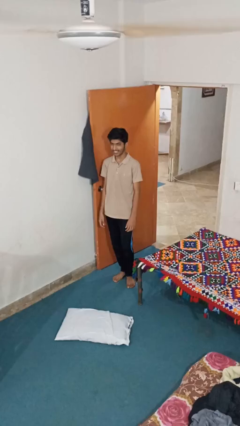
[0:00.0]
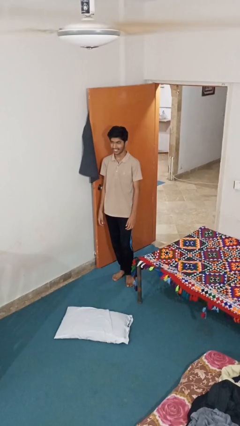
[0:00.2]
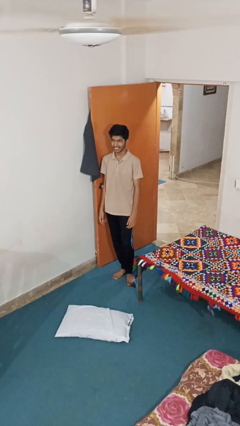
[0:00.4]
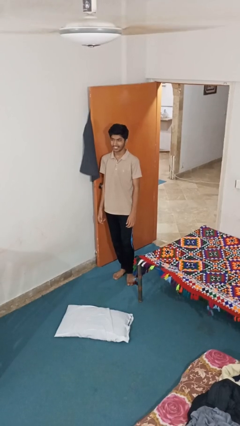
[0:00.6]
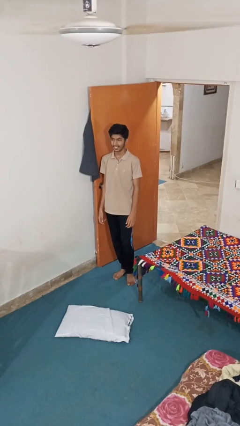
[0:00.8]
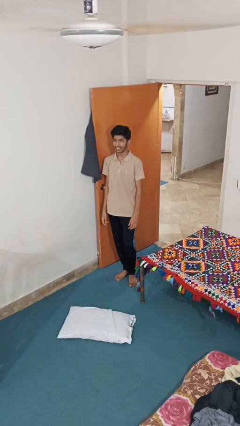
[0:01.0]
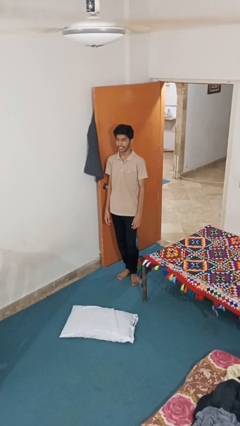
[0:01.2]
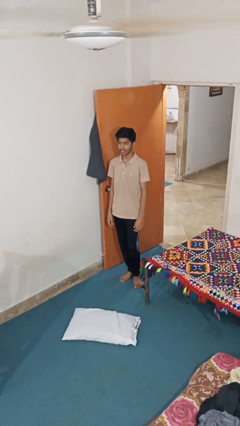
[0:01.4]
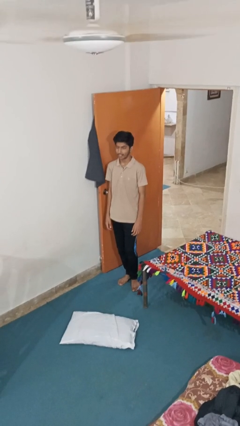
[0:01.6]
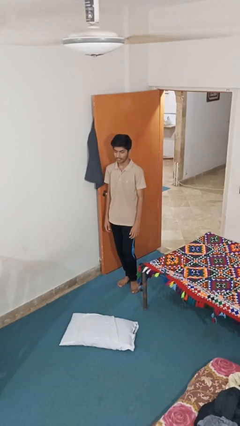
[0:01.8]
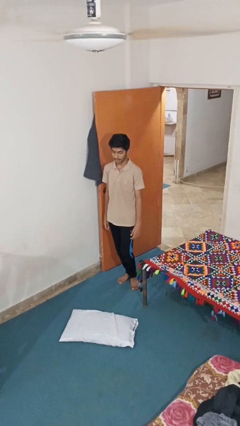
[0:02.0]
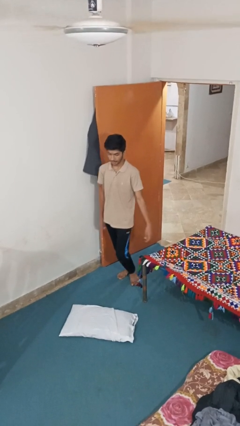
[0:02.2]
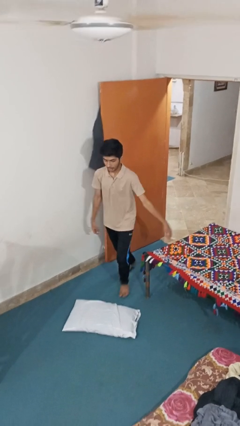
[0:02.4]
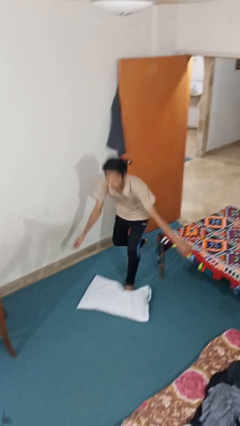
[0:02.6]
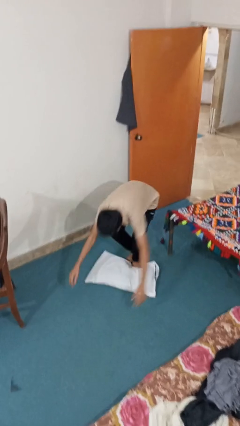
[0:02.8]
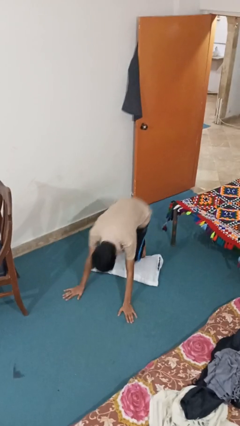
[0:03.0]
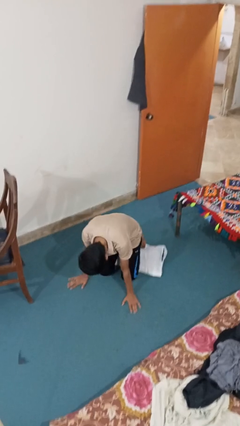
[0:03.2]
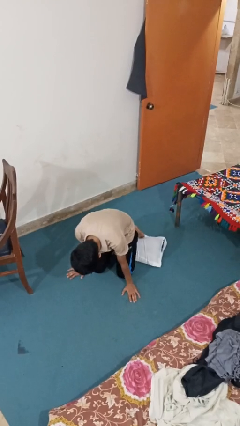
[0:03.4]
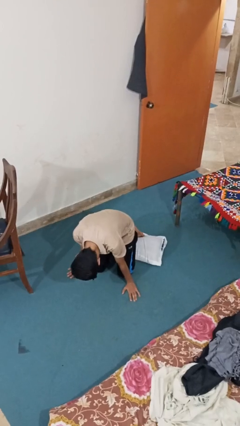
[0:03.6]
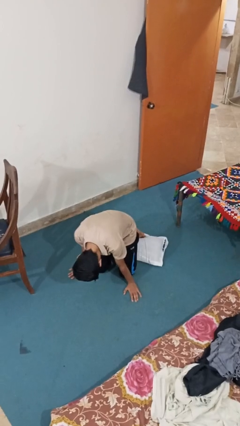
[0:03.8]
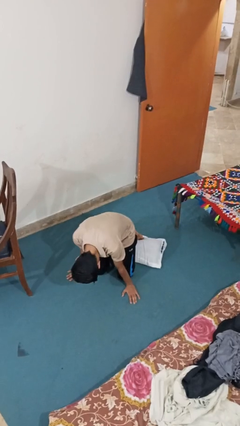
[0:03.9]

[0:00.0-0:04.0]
person trips on object on floor

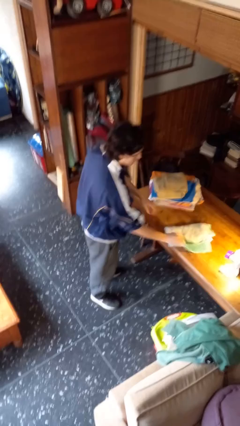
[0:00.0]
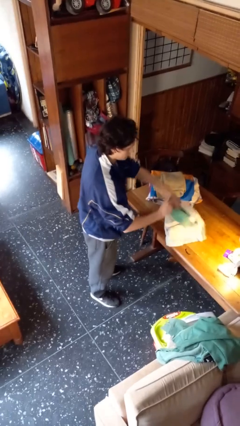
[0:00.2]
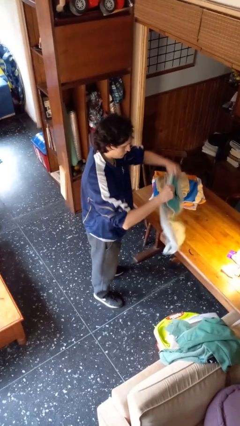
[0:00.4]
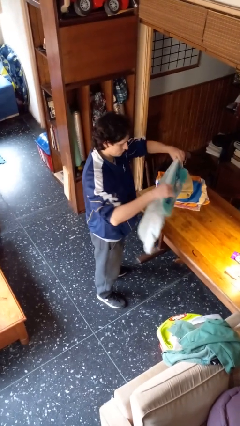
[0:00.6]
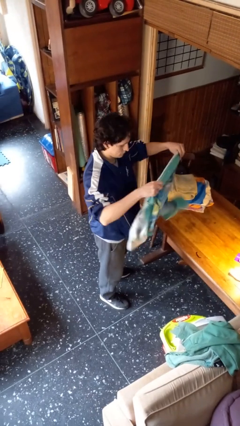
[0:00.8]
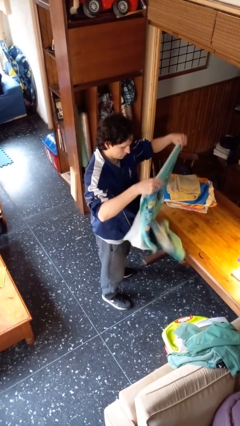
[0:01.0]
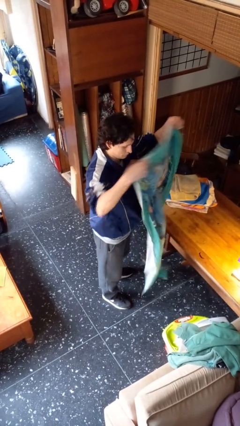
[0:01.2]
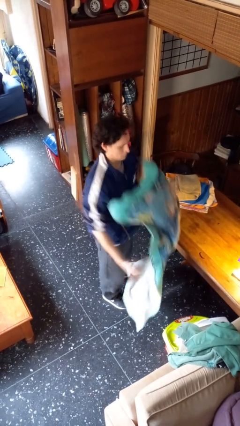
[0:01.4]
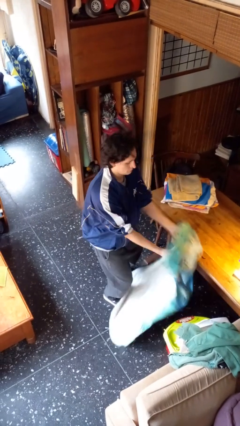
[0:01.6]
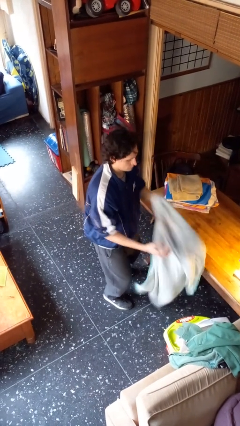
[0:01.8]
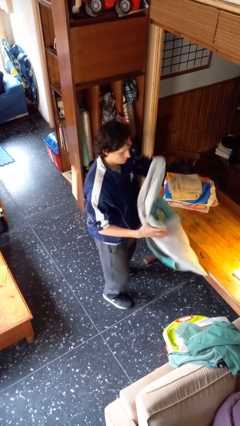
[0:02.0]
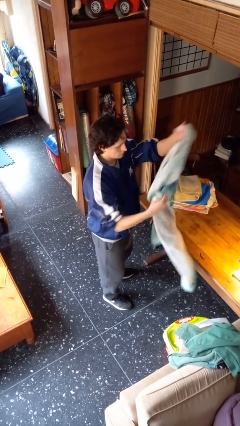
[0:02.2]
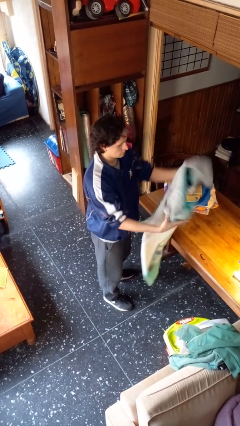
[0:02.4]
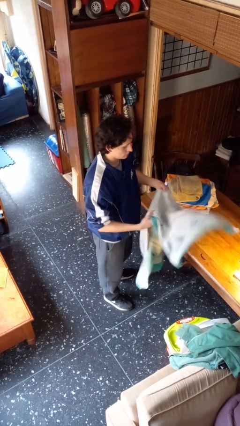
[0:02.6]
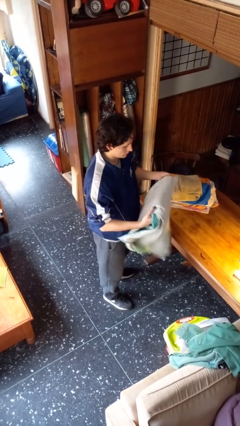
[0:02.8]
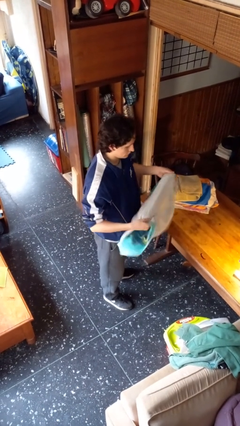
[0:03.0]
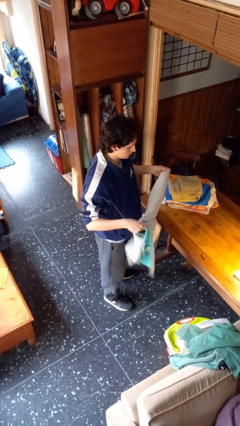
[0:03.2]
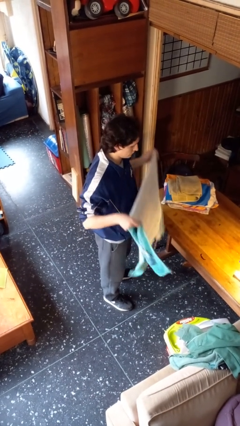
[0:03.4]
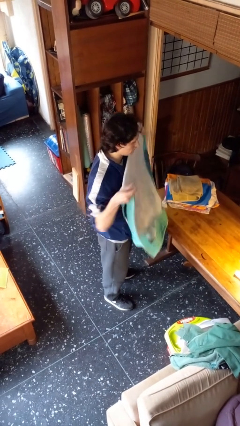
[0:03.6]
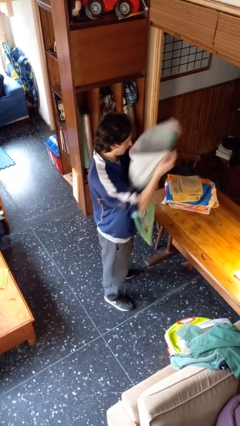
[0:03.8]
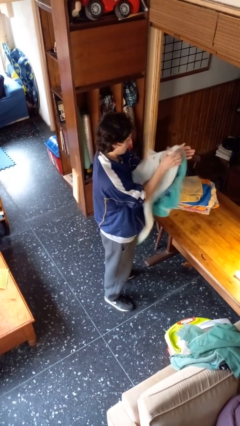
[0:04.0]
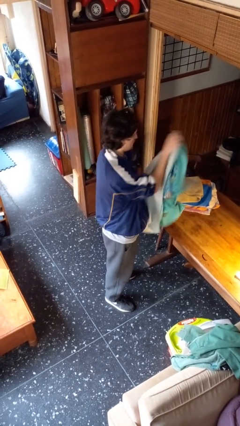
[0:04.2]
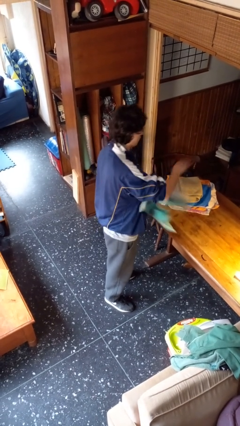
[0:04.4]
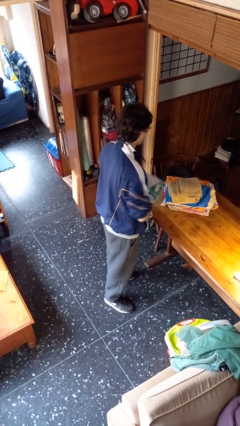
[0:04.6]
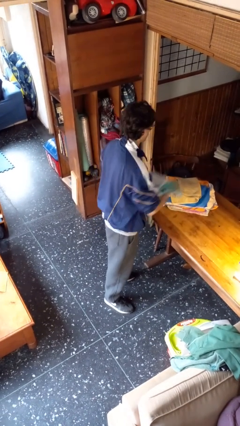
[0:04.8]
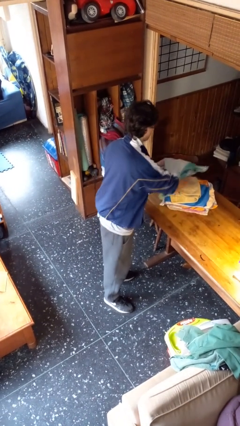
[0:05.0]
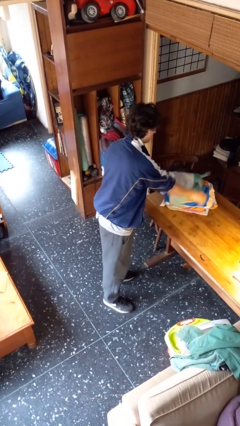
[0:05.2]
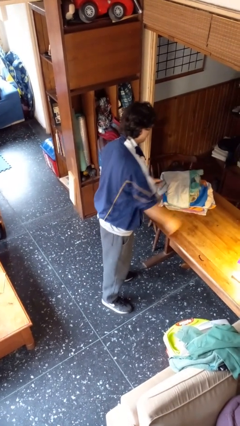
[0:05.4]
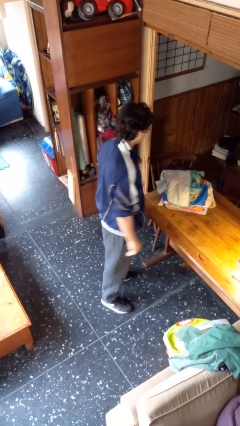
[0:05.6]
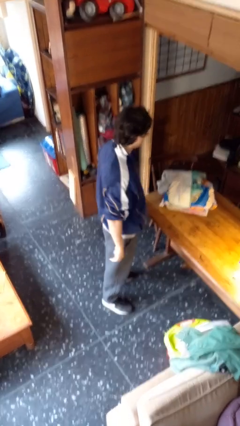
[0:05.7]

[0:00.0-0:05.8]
person folds towel

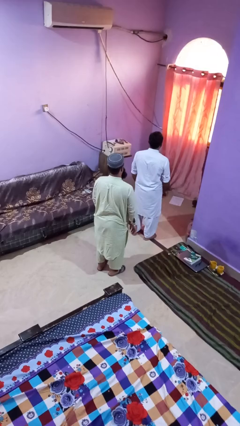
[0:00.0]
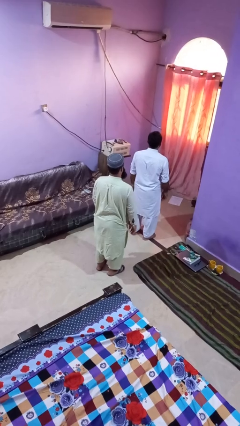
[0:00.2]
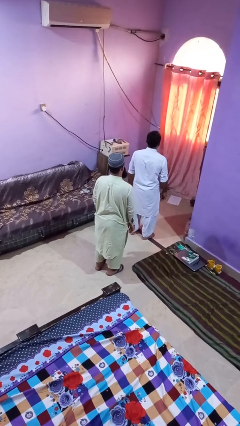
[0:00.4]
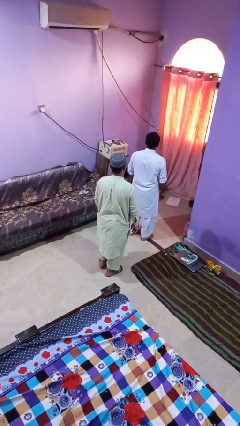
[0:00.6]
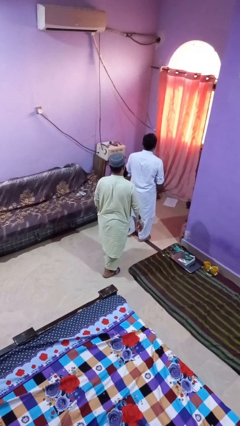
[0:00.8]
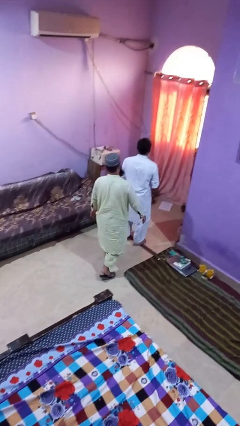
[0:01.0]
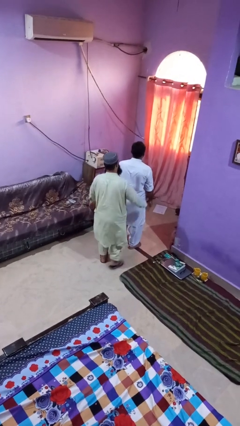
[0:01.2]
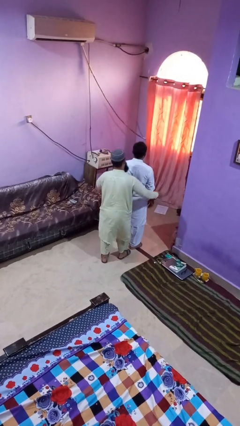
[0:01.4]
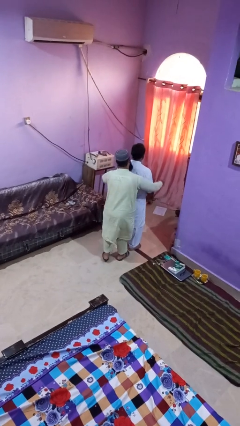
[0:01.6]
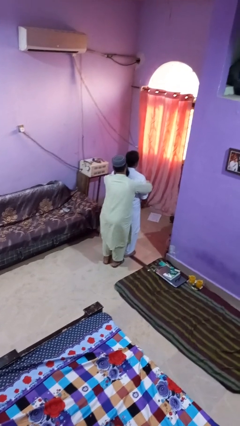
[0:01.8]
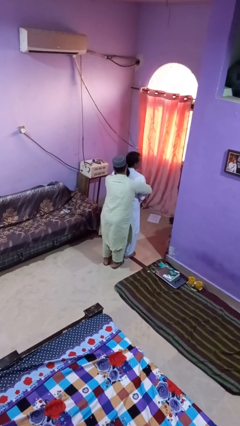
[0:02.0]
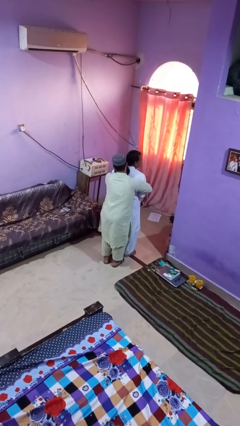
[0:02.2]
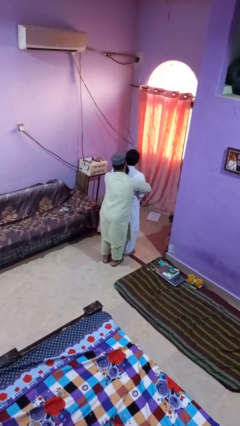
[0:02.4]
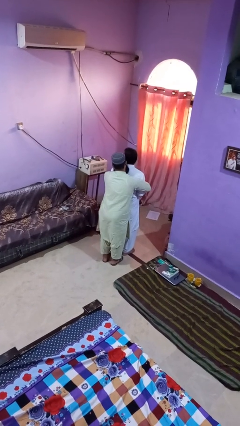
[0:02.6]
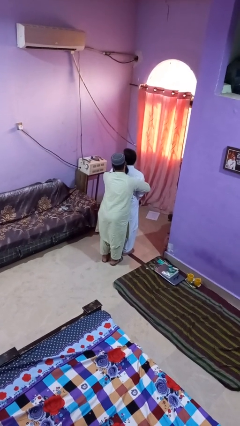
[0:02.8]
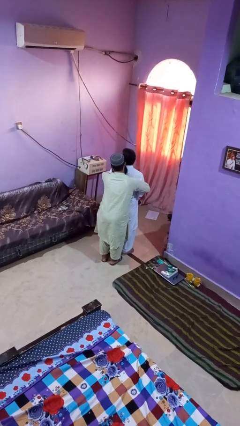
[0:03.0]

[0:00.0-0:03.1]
person hugs person from behind

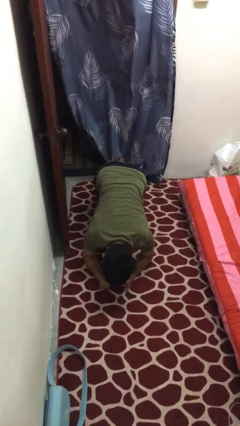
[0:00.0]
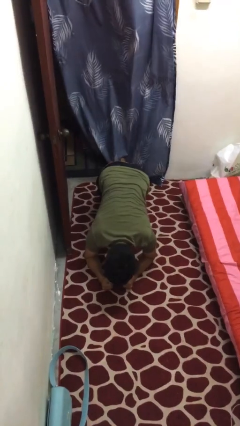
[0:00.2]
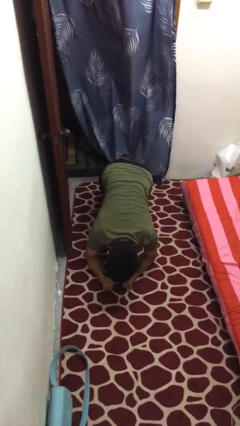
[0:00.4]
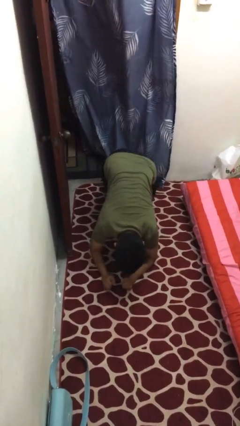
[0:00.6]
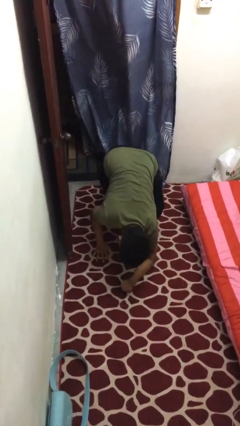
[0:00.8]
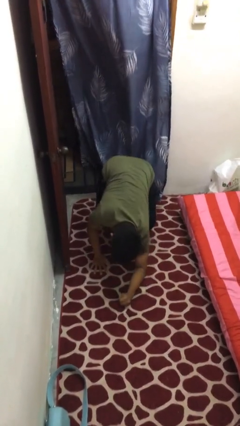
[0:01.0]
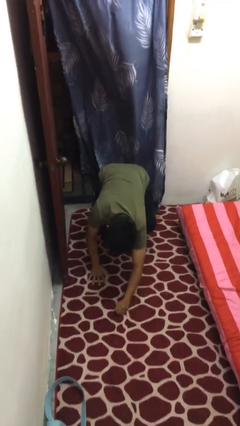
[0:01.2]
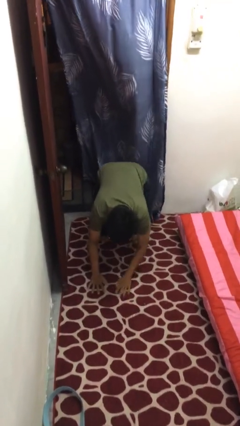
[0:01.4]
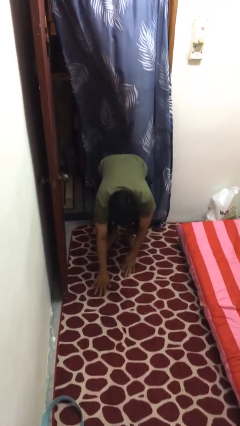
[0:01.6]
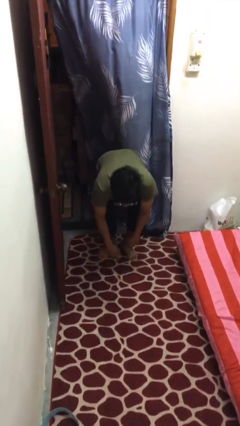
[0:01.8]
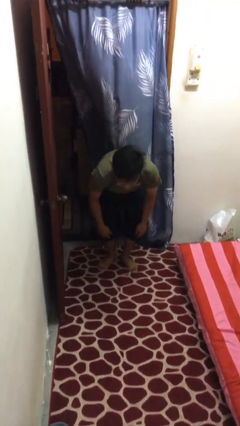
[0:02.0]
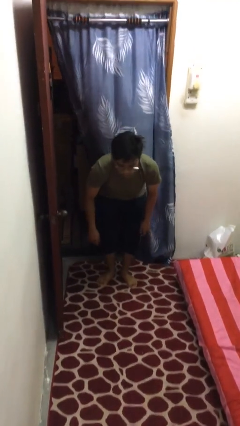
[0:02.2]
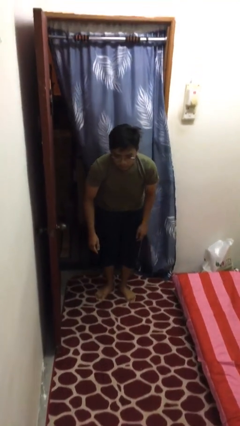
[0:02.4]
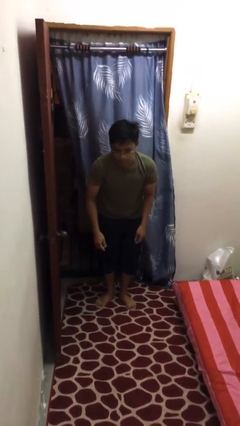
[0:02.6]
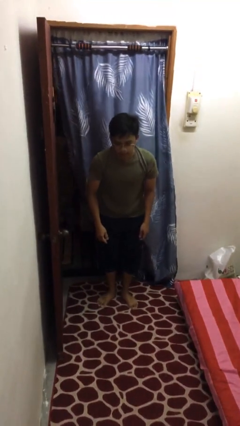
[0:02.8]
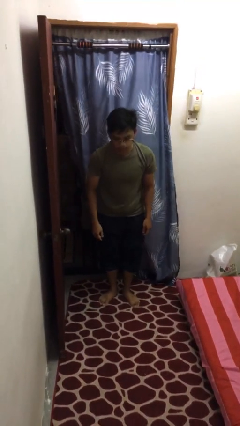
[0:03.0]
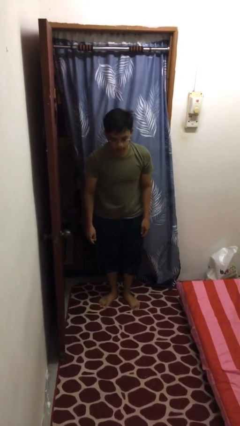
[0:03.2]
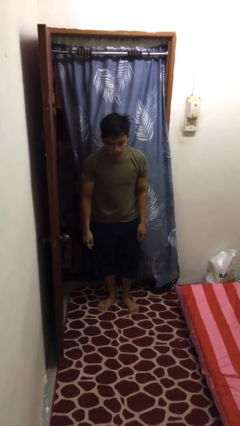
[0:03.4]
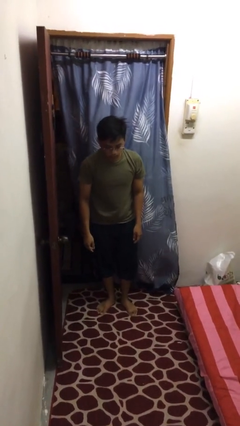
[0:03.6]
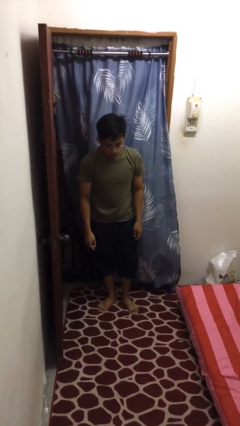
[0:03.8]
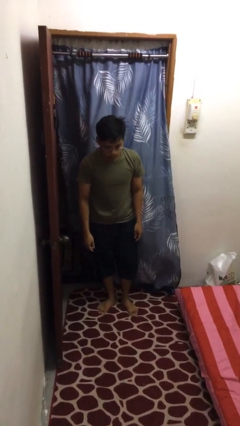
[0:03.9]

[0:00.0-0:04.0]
person stands up from floor

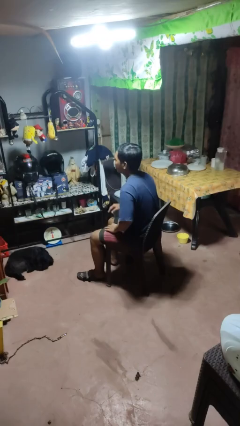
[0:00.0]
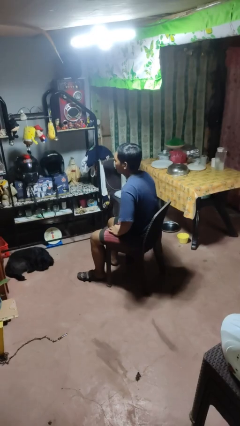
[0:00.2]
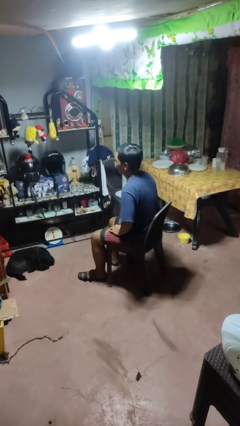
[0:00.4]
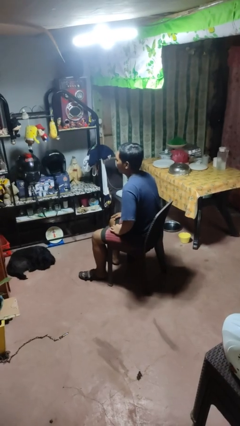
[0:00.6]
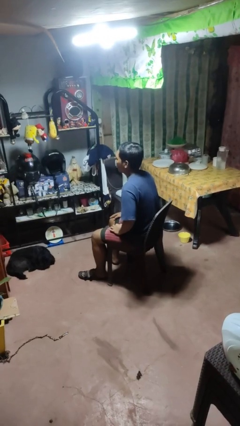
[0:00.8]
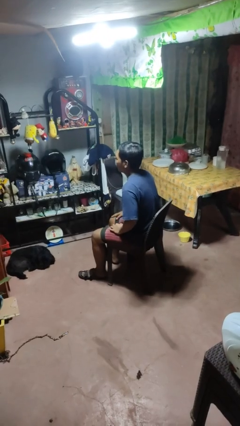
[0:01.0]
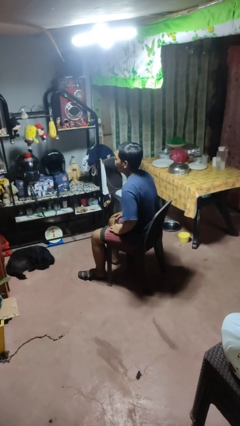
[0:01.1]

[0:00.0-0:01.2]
person slaps hands on thighs
